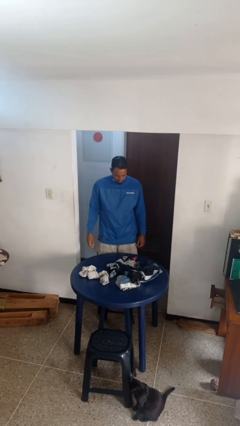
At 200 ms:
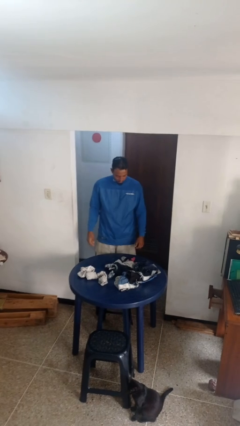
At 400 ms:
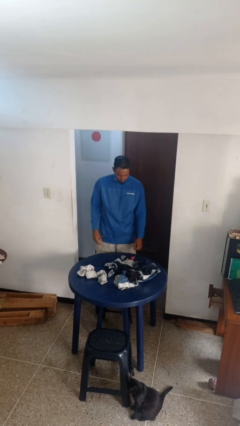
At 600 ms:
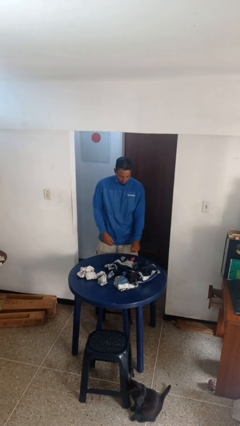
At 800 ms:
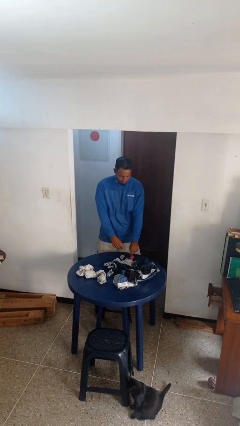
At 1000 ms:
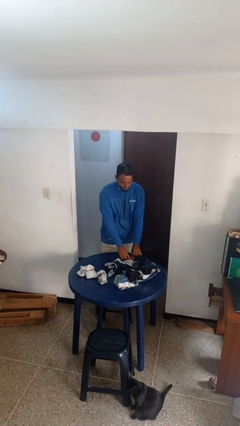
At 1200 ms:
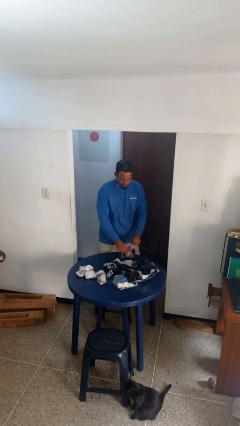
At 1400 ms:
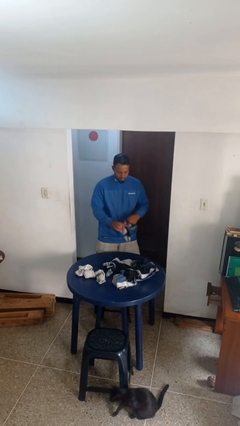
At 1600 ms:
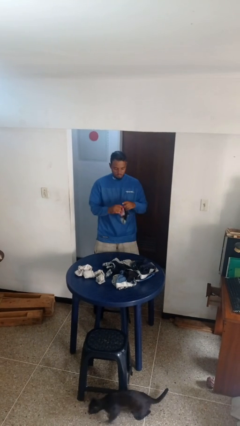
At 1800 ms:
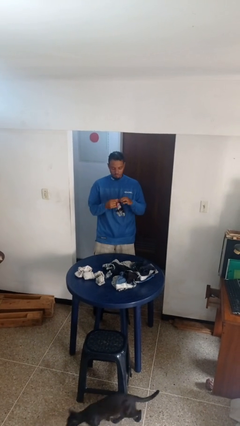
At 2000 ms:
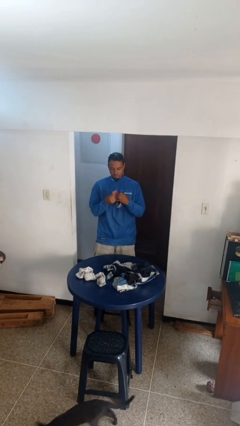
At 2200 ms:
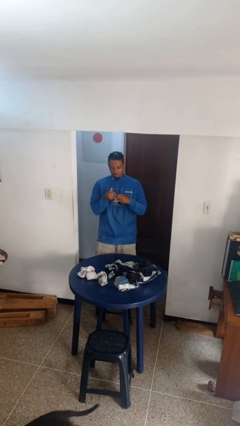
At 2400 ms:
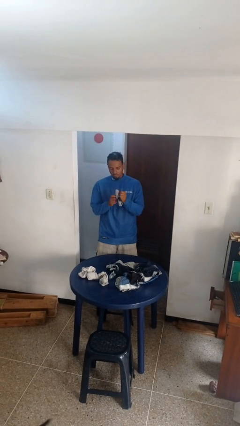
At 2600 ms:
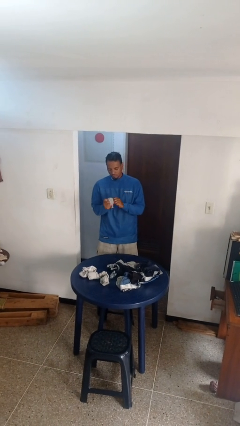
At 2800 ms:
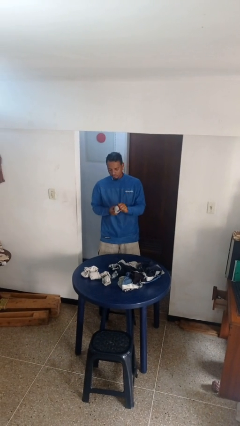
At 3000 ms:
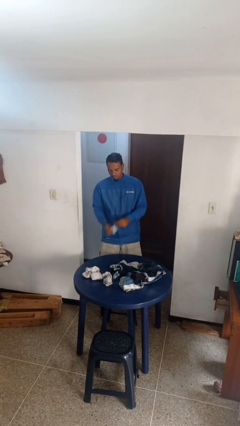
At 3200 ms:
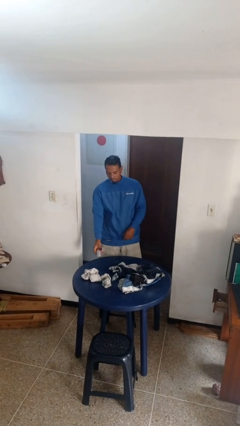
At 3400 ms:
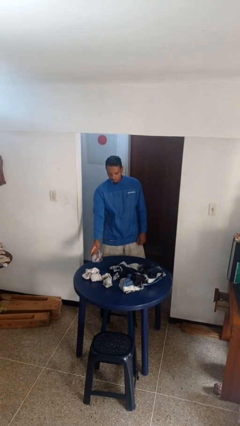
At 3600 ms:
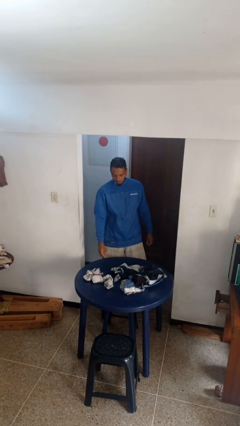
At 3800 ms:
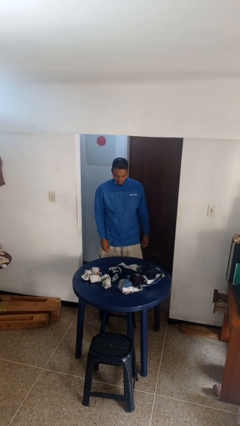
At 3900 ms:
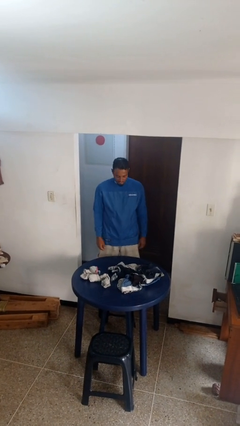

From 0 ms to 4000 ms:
person folds socks

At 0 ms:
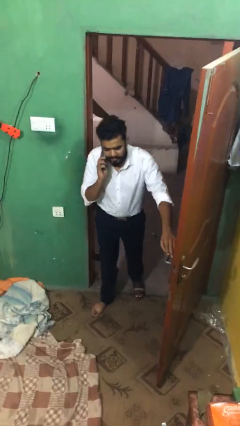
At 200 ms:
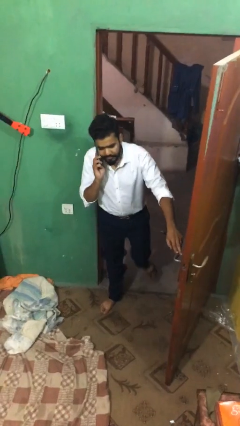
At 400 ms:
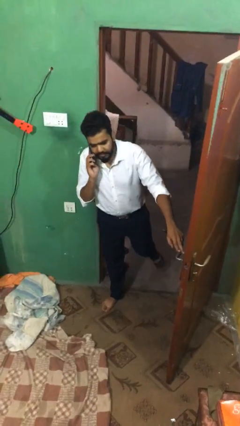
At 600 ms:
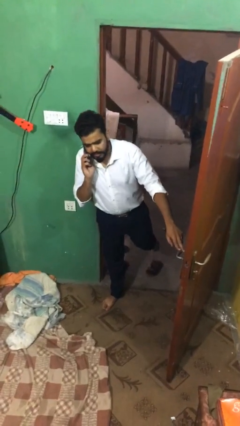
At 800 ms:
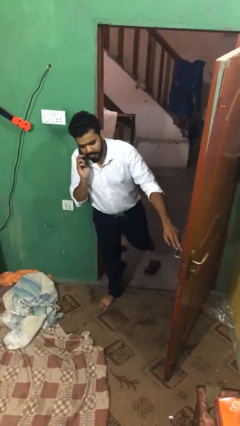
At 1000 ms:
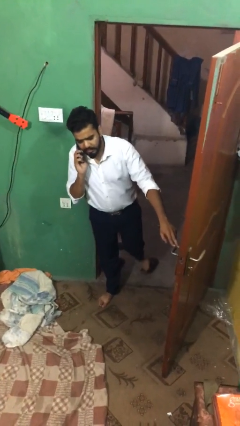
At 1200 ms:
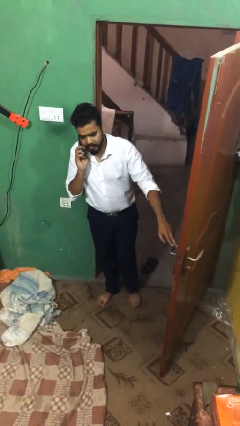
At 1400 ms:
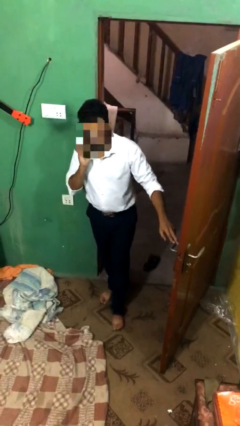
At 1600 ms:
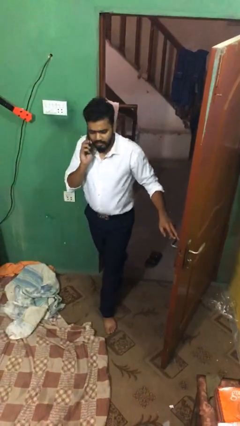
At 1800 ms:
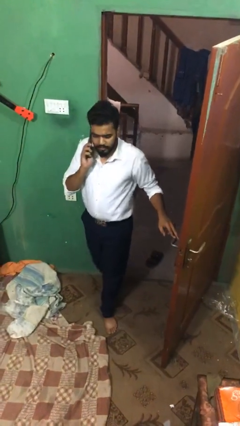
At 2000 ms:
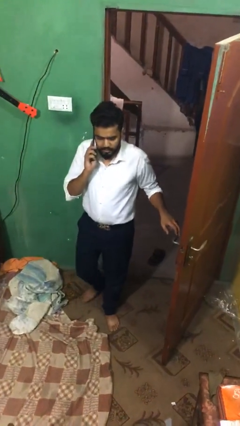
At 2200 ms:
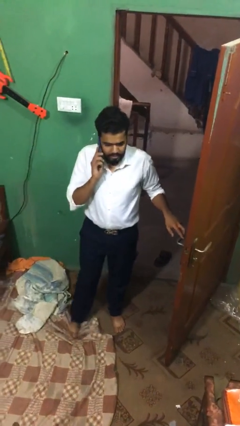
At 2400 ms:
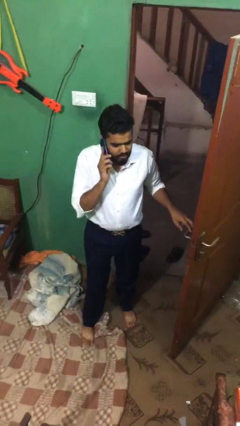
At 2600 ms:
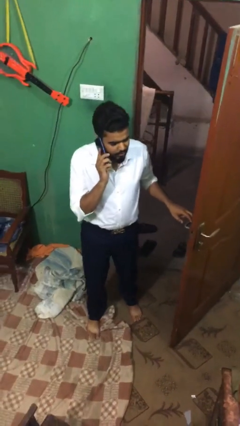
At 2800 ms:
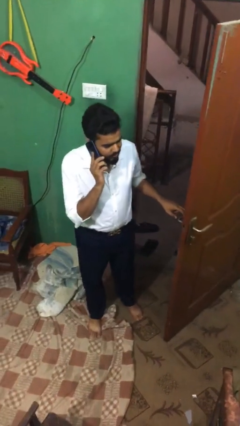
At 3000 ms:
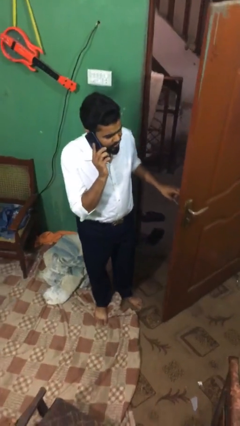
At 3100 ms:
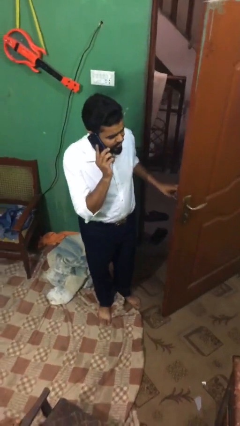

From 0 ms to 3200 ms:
person enters scene through structure

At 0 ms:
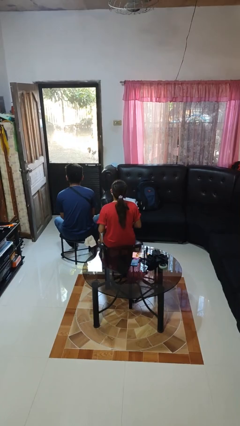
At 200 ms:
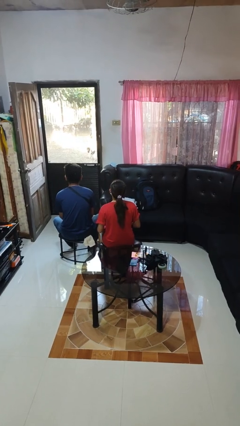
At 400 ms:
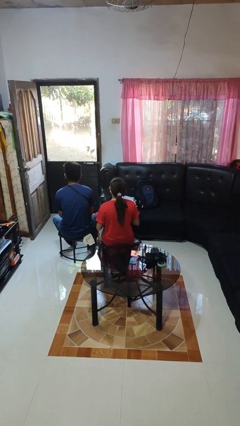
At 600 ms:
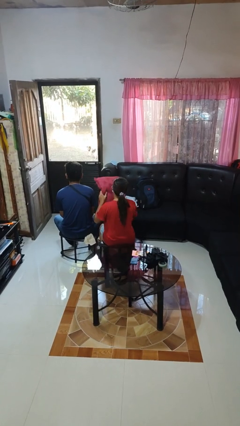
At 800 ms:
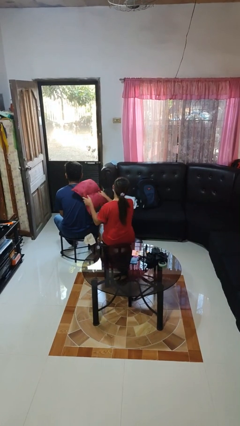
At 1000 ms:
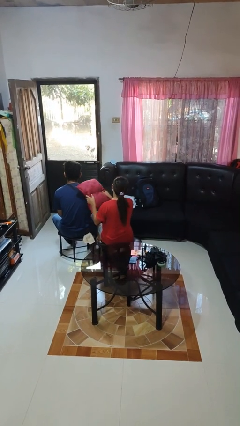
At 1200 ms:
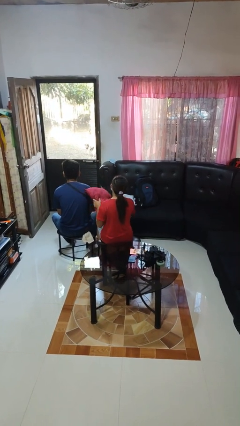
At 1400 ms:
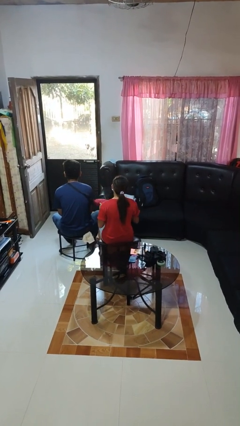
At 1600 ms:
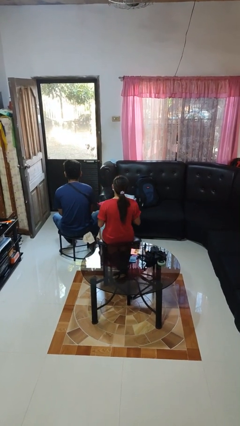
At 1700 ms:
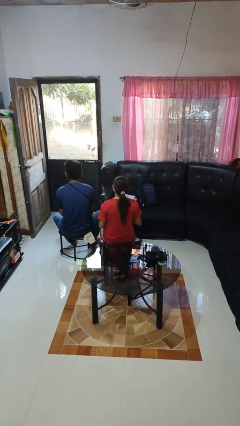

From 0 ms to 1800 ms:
person hits person with pillow

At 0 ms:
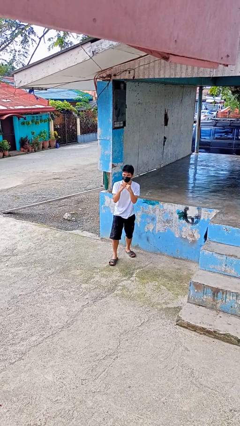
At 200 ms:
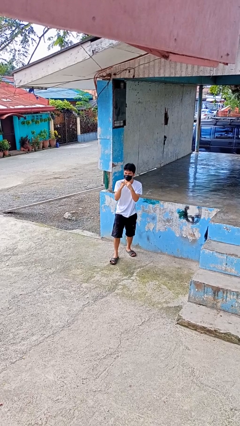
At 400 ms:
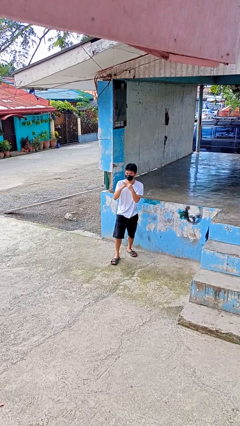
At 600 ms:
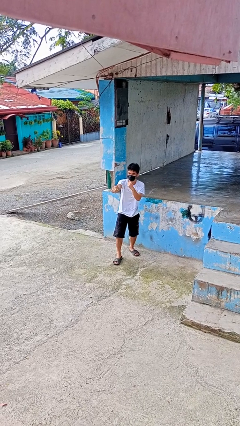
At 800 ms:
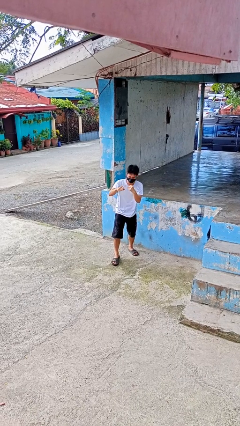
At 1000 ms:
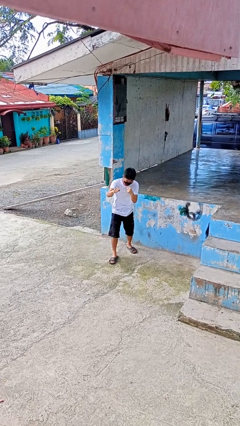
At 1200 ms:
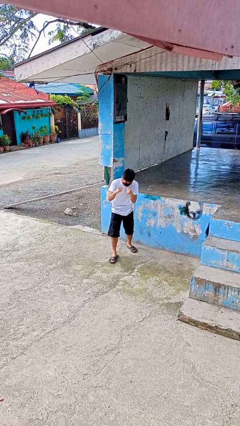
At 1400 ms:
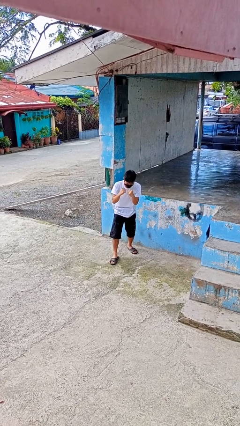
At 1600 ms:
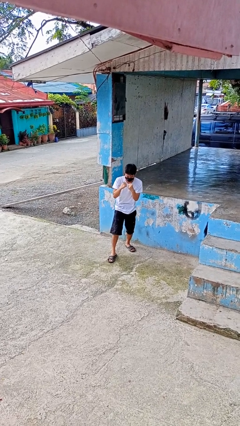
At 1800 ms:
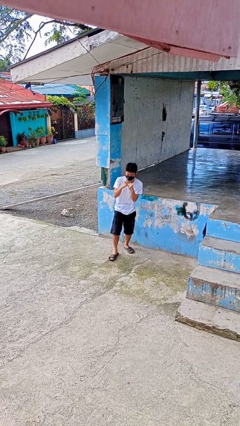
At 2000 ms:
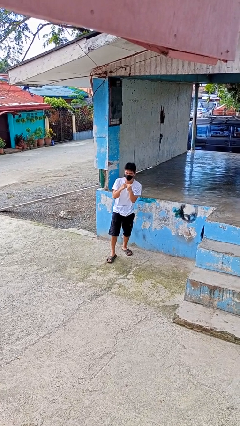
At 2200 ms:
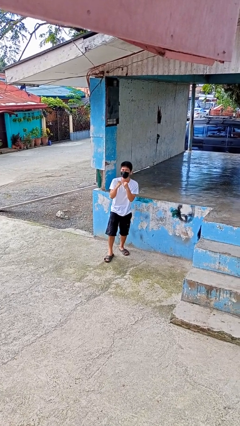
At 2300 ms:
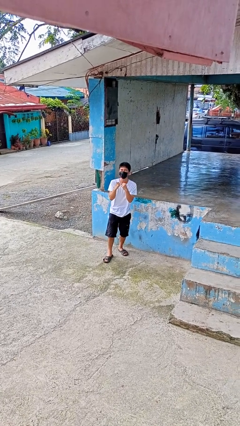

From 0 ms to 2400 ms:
person punches

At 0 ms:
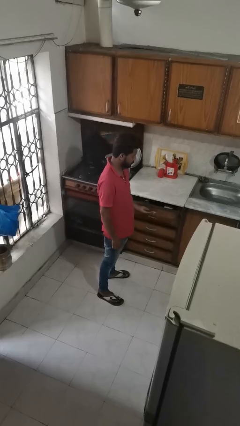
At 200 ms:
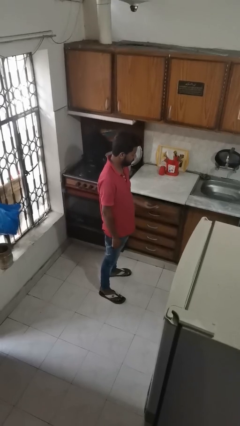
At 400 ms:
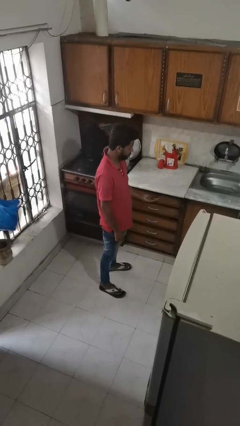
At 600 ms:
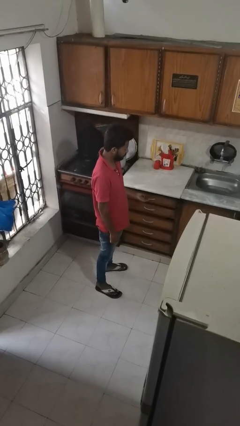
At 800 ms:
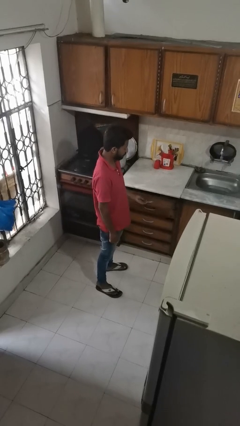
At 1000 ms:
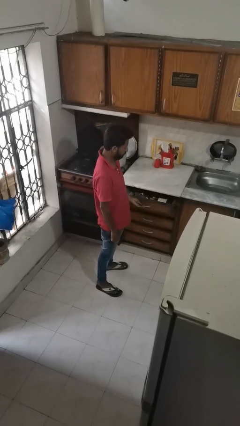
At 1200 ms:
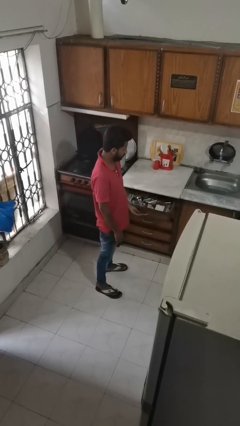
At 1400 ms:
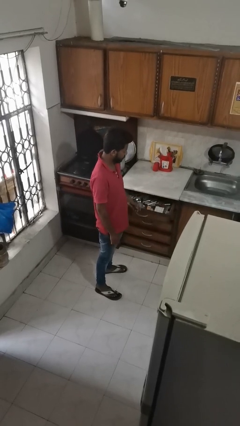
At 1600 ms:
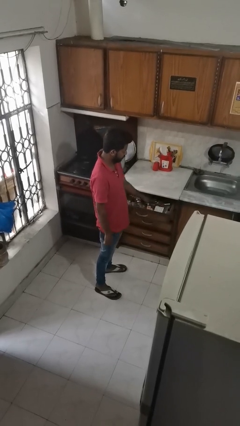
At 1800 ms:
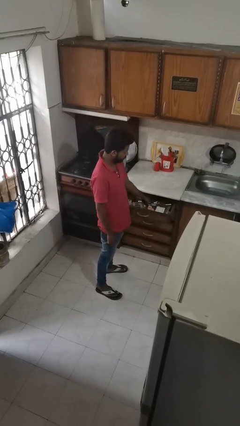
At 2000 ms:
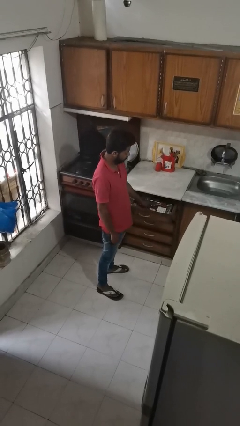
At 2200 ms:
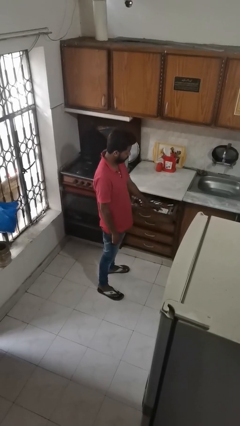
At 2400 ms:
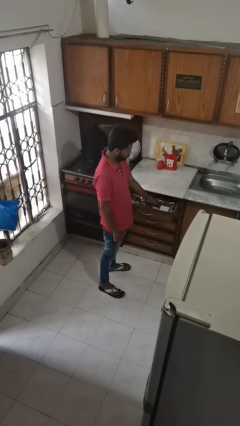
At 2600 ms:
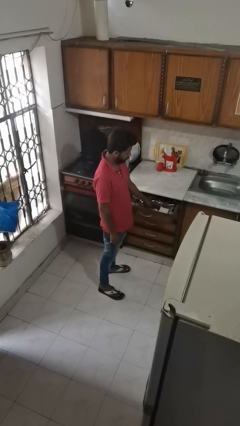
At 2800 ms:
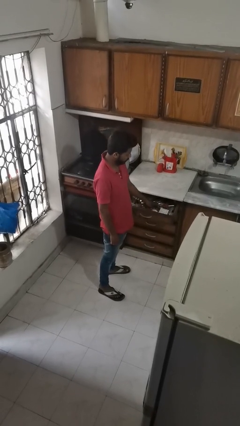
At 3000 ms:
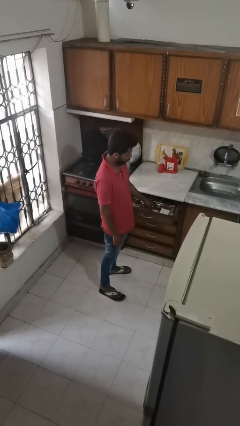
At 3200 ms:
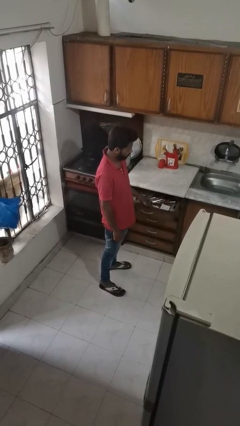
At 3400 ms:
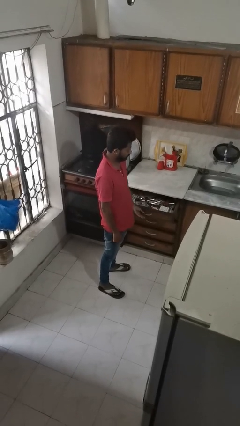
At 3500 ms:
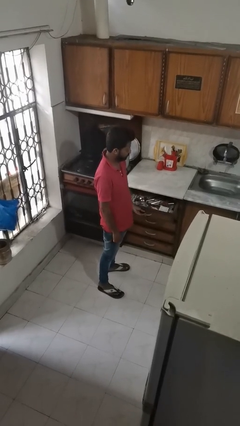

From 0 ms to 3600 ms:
person searches in kitchen drawer

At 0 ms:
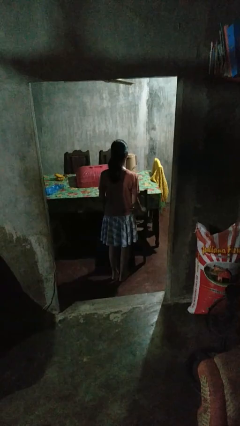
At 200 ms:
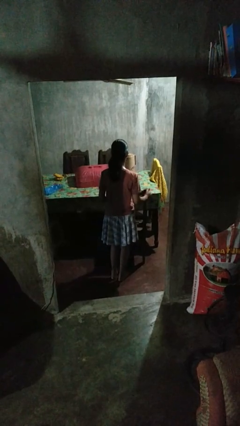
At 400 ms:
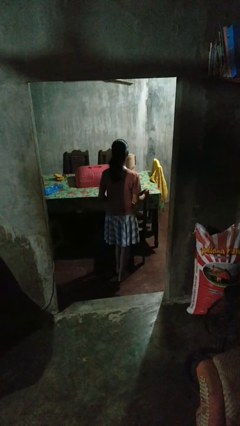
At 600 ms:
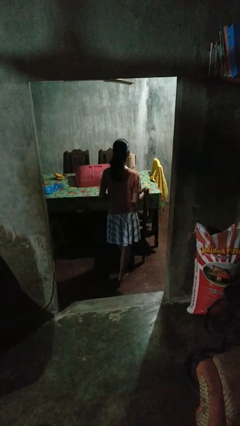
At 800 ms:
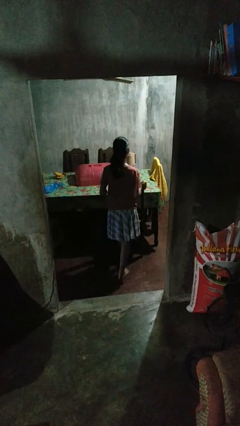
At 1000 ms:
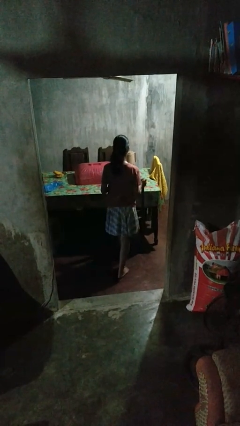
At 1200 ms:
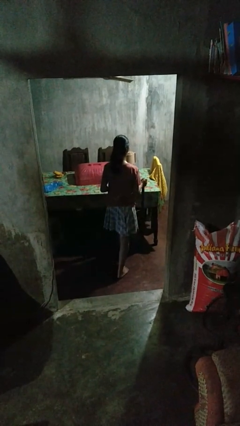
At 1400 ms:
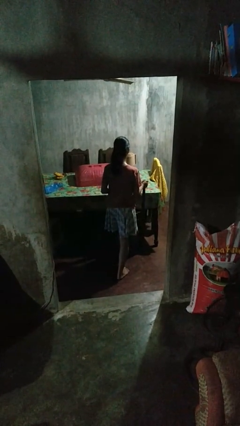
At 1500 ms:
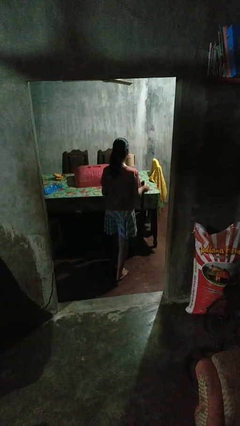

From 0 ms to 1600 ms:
person pushes in chair

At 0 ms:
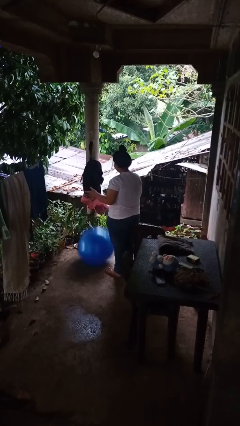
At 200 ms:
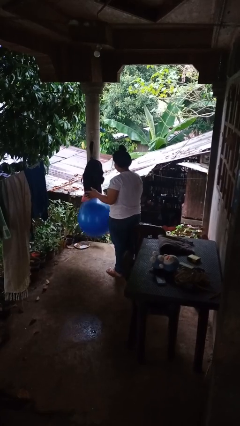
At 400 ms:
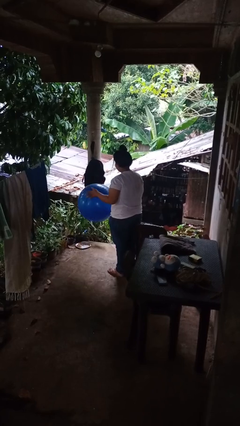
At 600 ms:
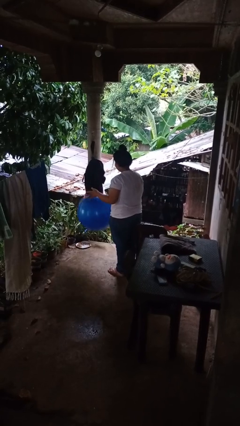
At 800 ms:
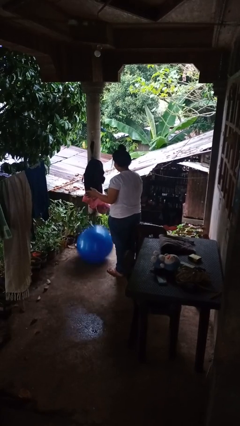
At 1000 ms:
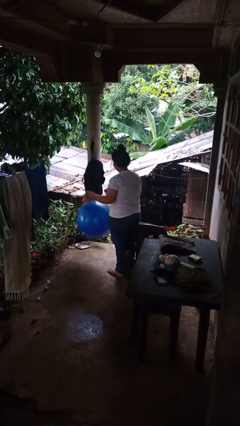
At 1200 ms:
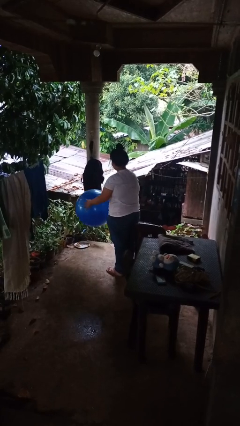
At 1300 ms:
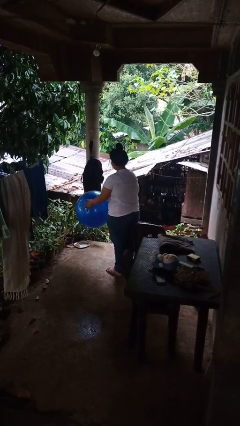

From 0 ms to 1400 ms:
person bounces ball on floor
